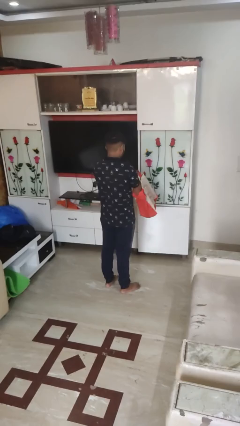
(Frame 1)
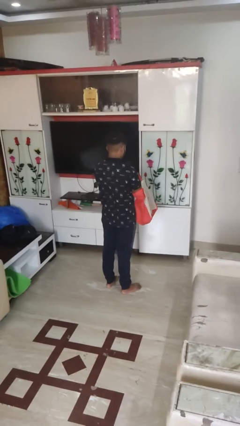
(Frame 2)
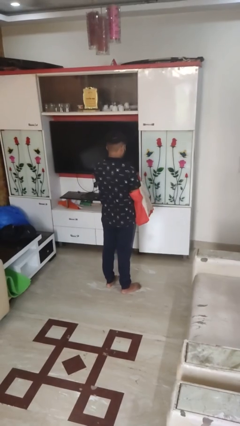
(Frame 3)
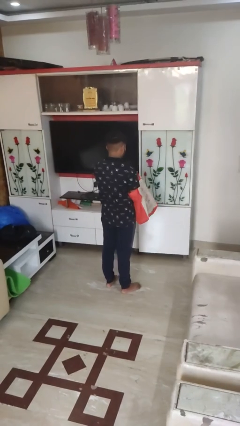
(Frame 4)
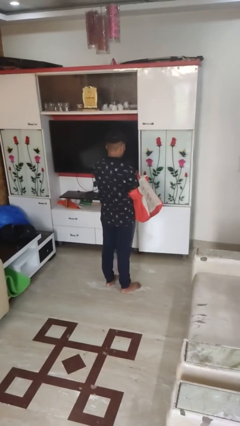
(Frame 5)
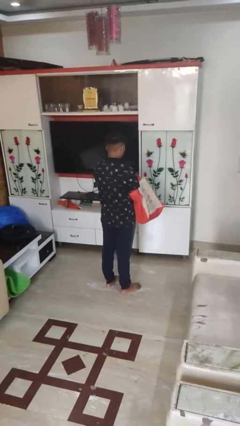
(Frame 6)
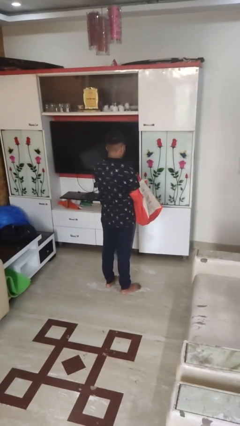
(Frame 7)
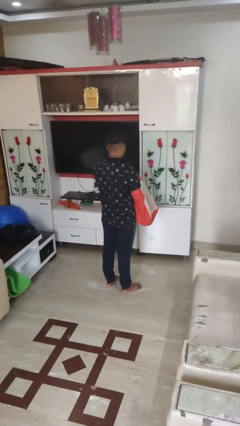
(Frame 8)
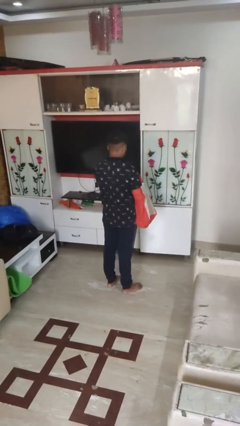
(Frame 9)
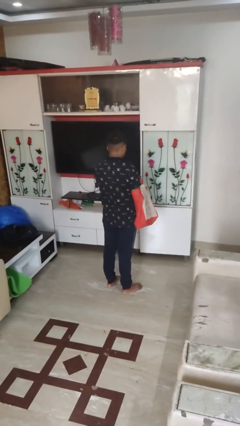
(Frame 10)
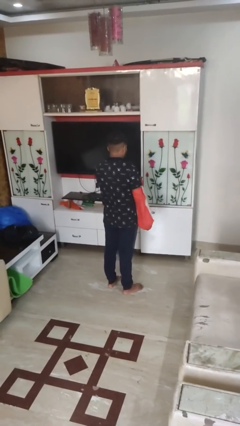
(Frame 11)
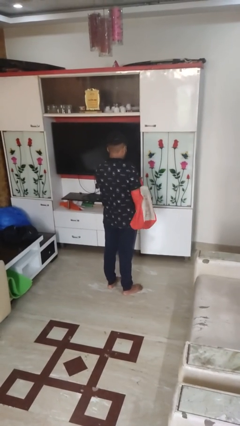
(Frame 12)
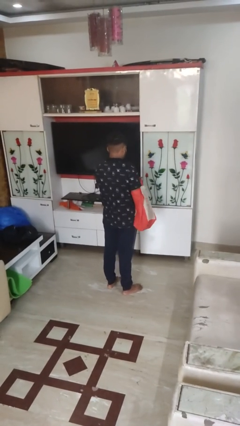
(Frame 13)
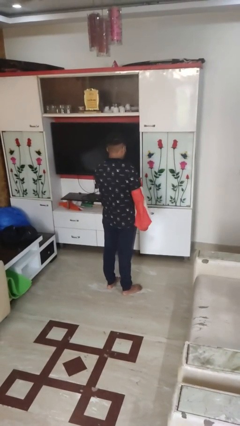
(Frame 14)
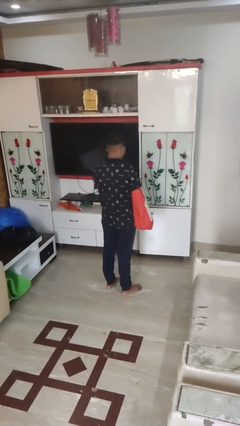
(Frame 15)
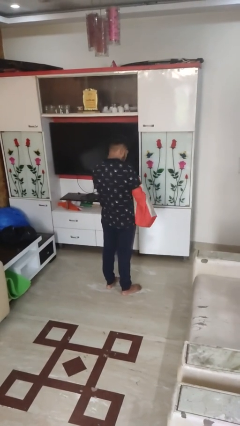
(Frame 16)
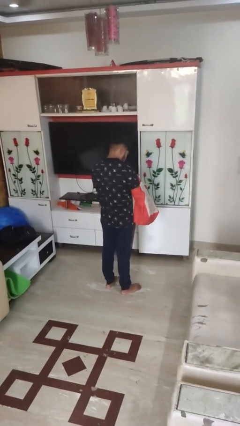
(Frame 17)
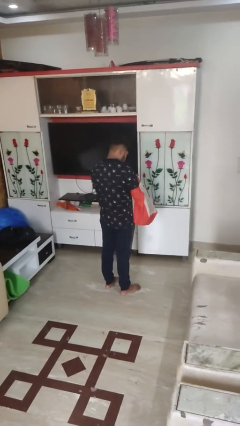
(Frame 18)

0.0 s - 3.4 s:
person searches in bag

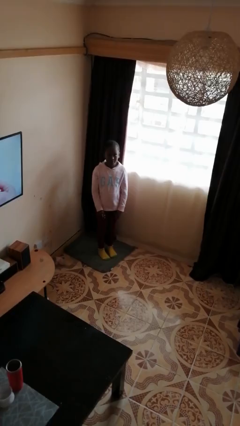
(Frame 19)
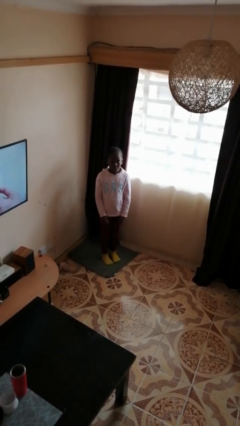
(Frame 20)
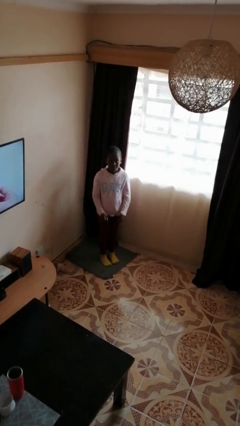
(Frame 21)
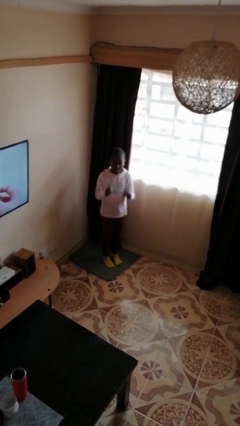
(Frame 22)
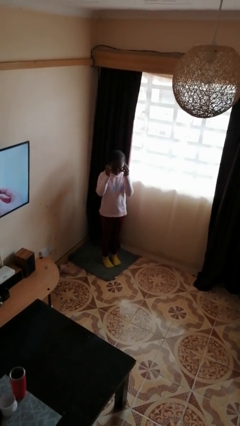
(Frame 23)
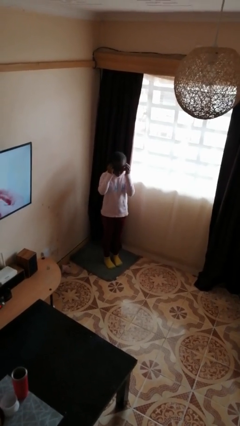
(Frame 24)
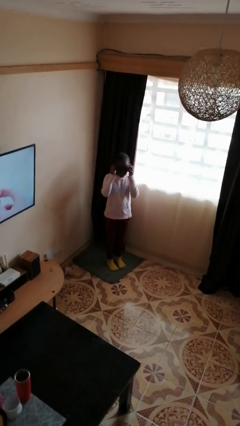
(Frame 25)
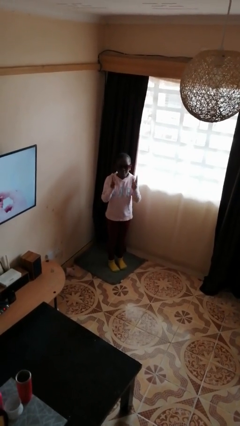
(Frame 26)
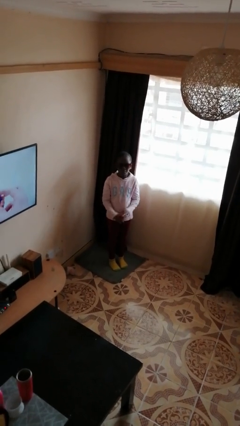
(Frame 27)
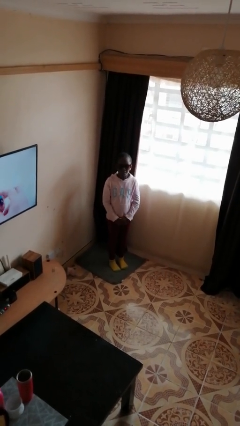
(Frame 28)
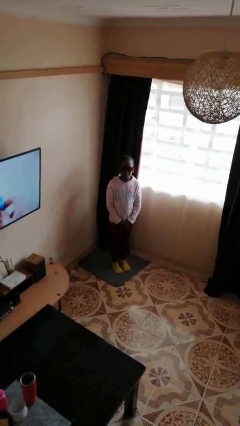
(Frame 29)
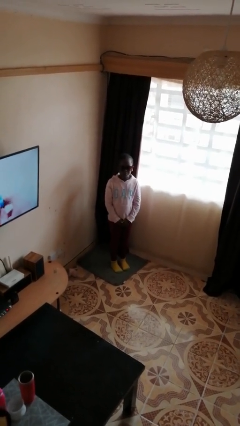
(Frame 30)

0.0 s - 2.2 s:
person puts on sunglasses

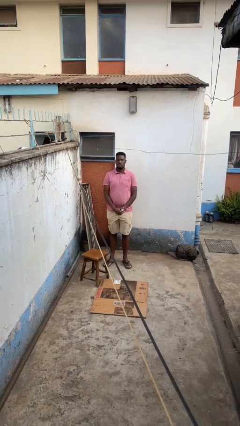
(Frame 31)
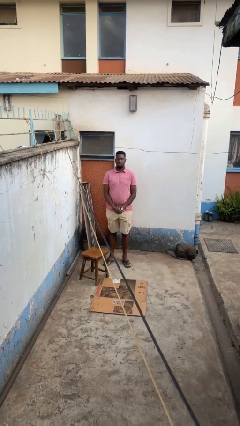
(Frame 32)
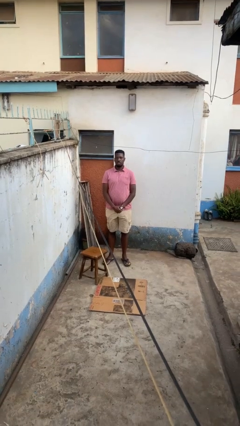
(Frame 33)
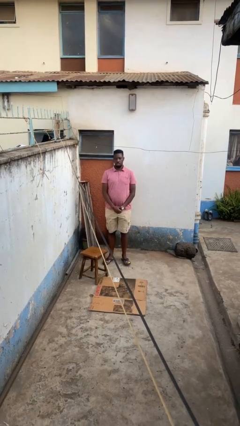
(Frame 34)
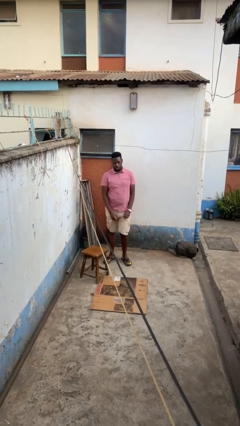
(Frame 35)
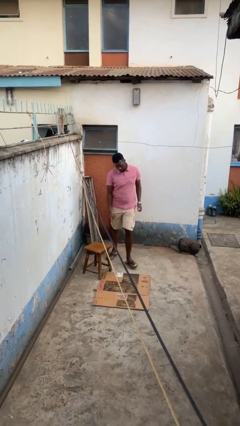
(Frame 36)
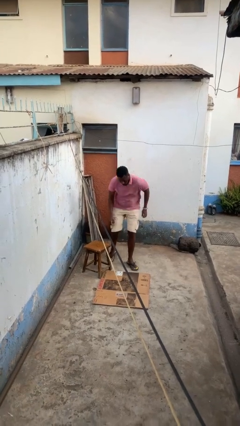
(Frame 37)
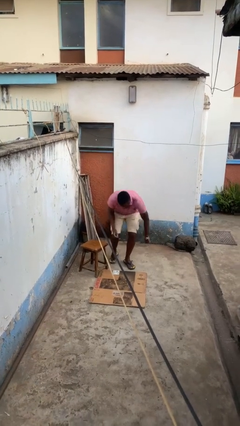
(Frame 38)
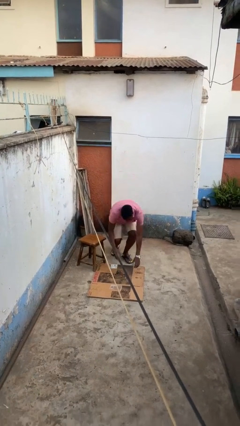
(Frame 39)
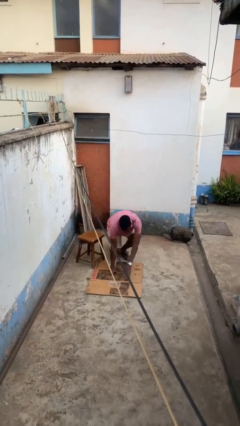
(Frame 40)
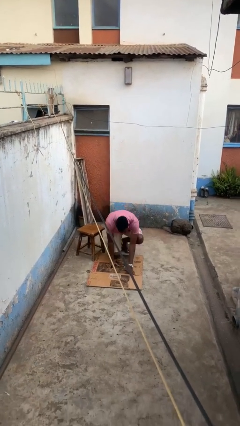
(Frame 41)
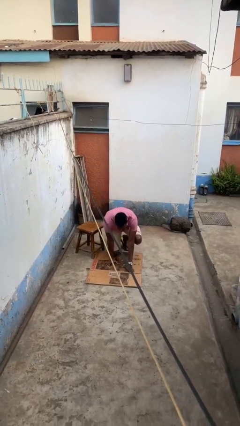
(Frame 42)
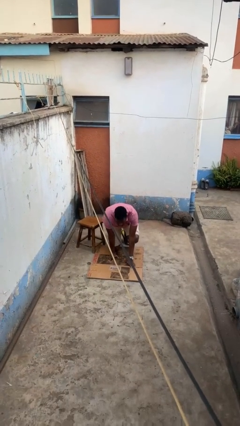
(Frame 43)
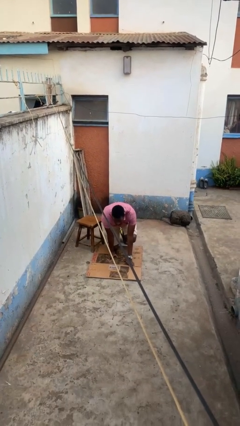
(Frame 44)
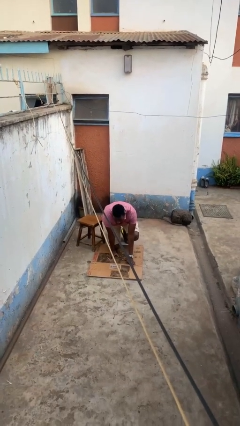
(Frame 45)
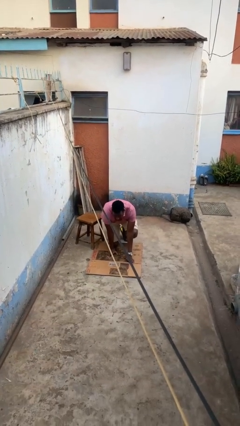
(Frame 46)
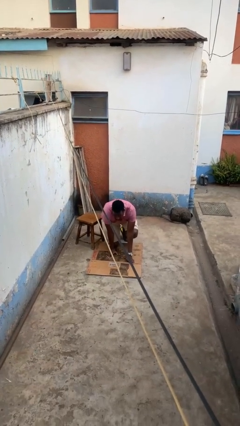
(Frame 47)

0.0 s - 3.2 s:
person trips on object on floor

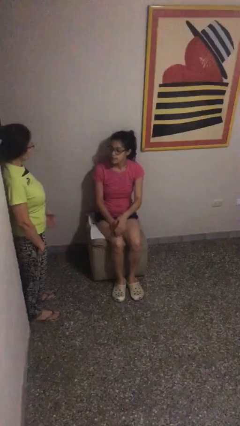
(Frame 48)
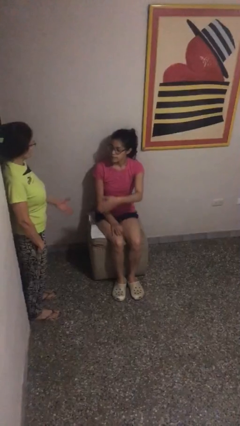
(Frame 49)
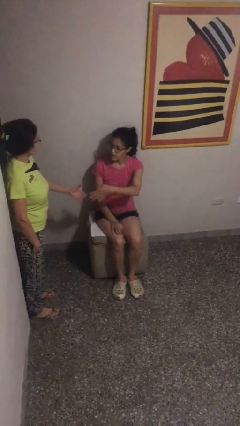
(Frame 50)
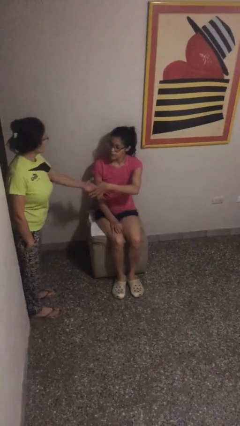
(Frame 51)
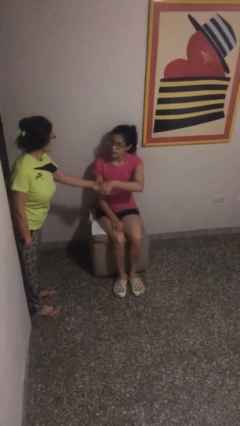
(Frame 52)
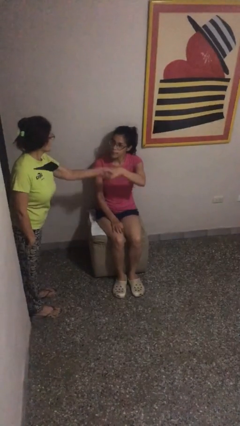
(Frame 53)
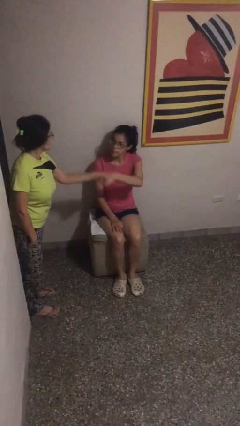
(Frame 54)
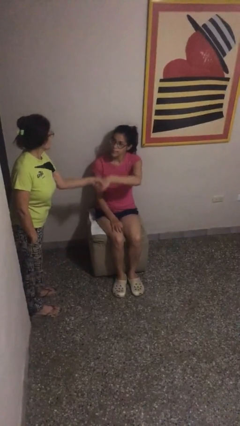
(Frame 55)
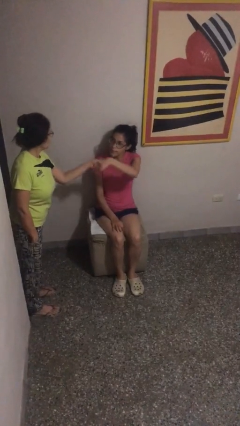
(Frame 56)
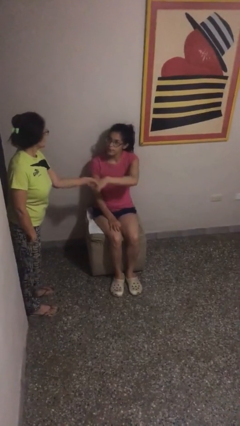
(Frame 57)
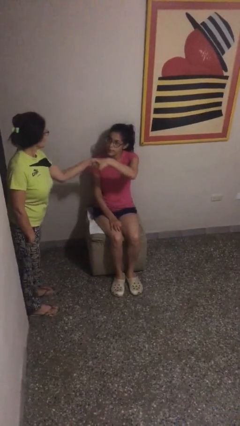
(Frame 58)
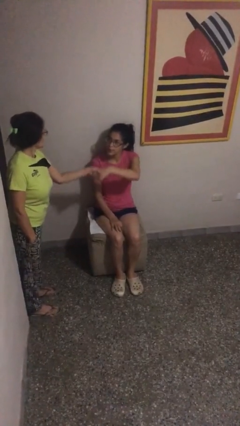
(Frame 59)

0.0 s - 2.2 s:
person shakes hand

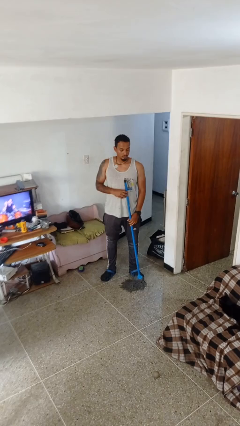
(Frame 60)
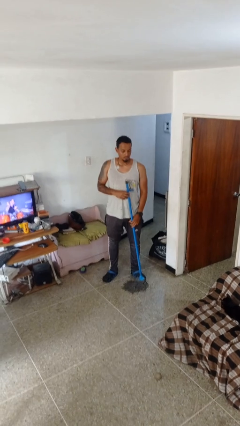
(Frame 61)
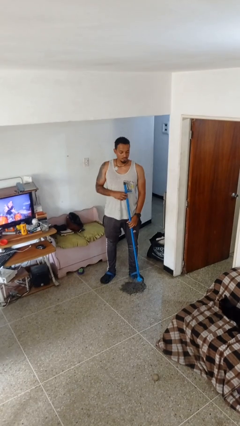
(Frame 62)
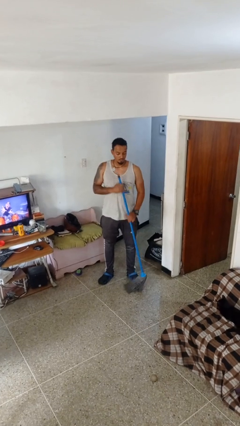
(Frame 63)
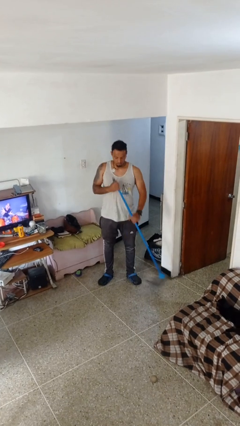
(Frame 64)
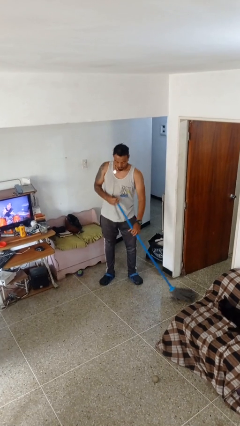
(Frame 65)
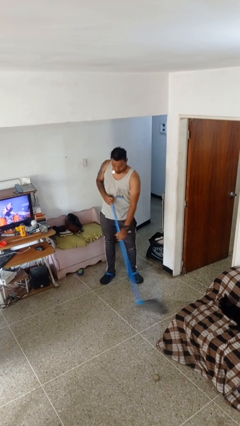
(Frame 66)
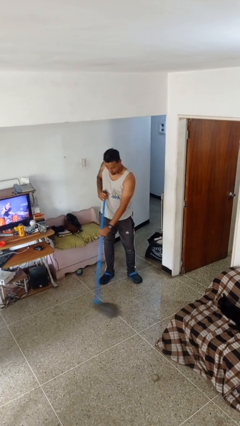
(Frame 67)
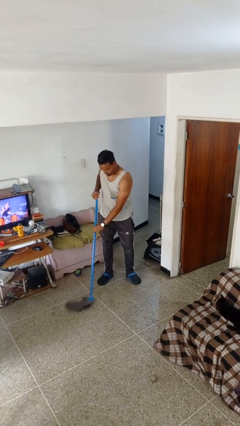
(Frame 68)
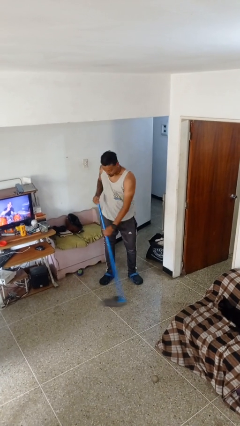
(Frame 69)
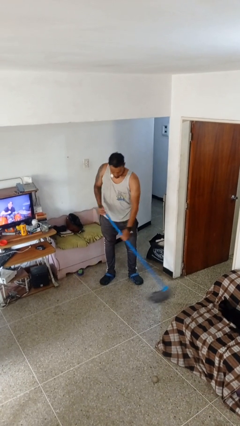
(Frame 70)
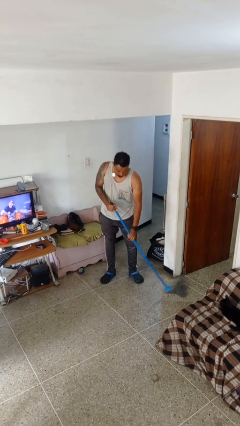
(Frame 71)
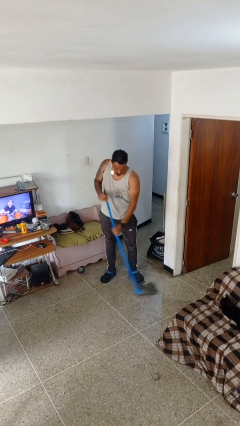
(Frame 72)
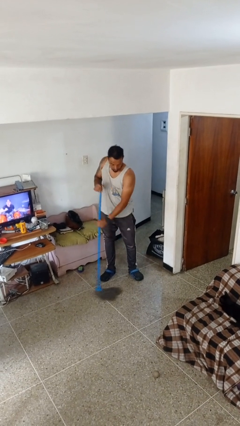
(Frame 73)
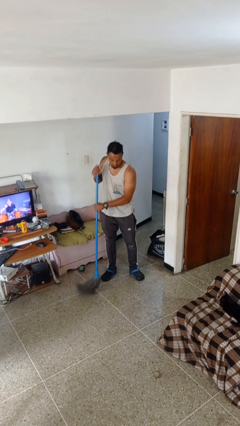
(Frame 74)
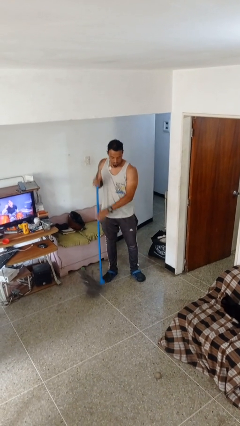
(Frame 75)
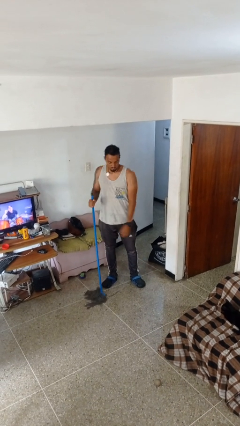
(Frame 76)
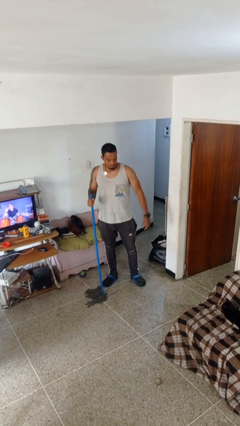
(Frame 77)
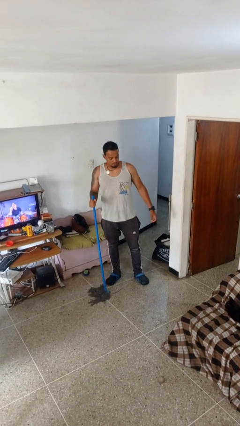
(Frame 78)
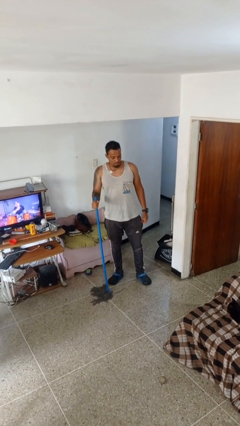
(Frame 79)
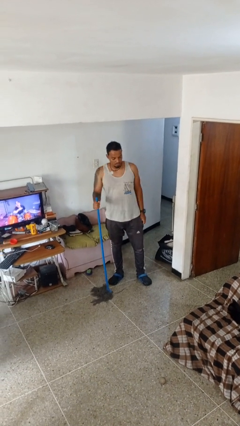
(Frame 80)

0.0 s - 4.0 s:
person mops

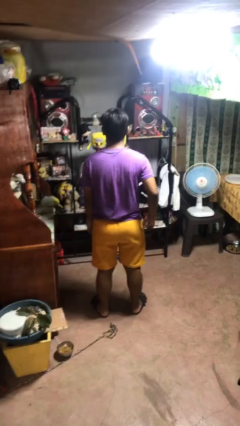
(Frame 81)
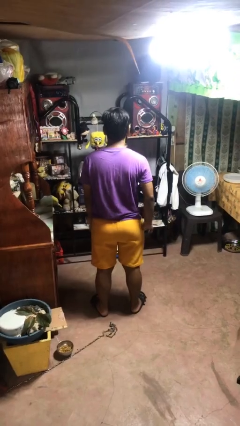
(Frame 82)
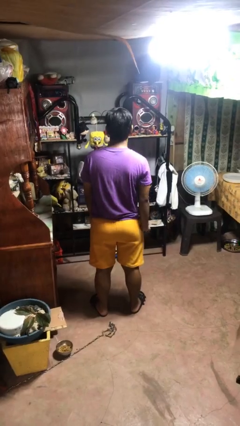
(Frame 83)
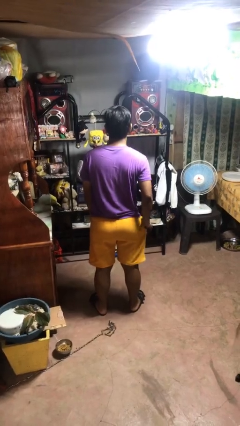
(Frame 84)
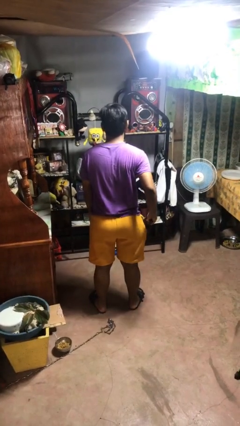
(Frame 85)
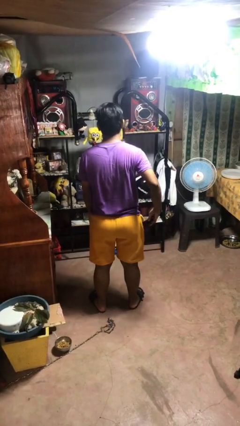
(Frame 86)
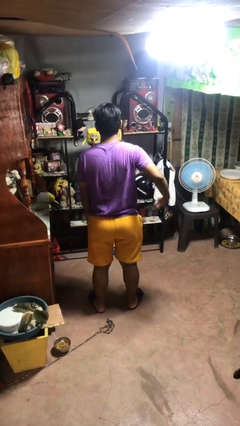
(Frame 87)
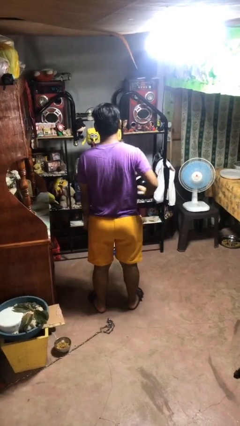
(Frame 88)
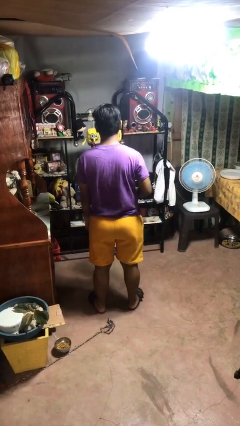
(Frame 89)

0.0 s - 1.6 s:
person takes phone from pocket

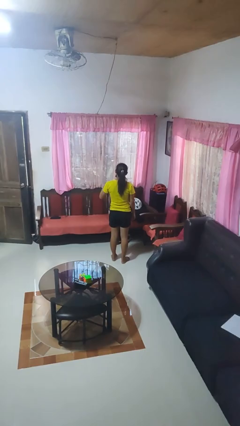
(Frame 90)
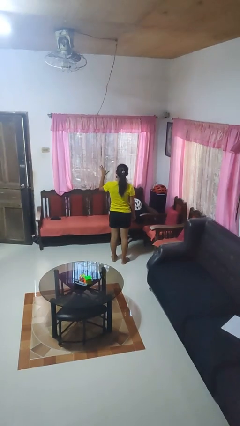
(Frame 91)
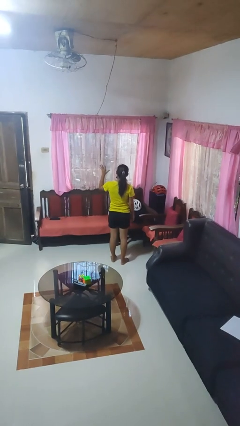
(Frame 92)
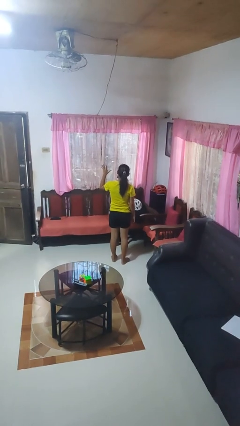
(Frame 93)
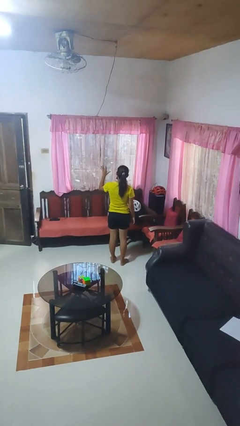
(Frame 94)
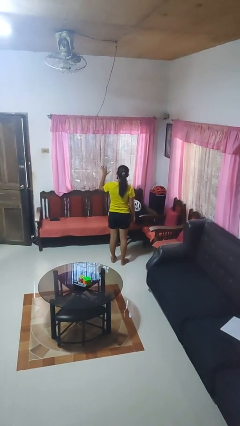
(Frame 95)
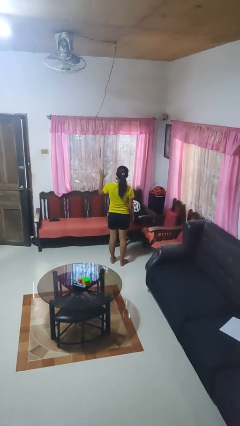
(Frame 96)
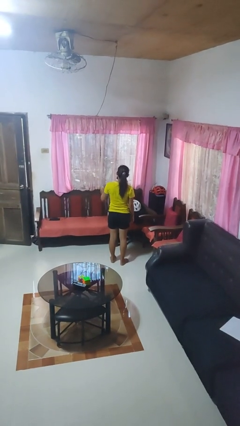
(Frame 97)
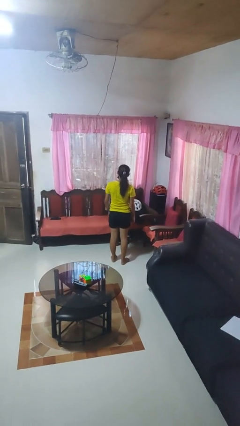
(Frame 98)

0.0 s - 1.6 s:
person gestures number five
